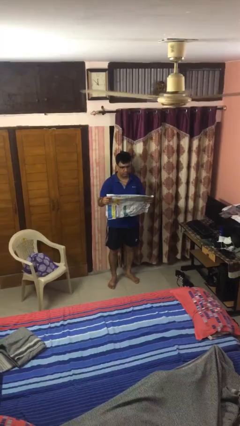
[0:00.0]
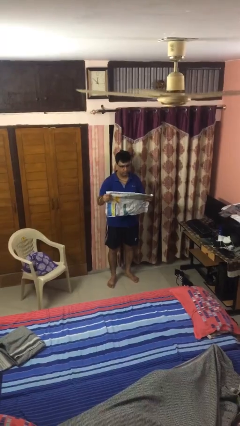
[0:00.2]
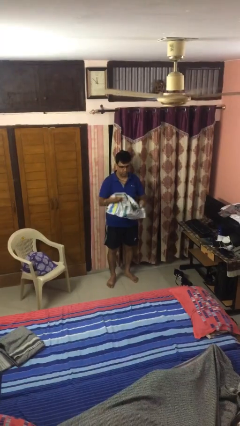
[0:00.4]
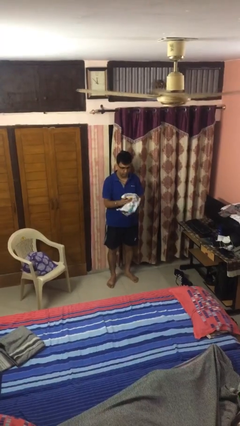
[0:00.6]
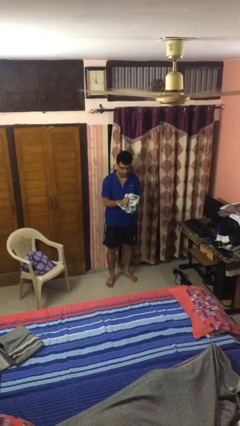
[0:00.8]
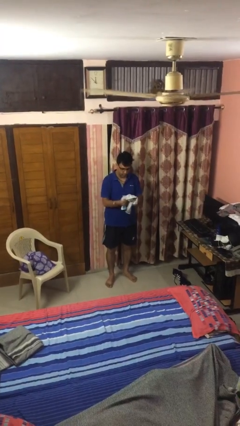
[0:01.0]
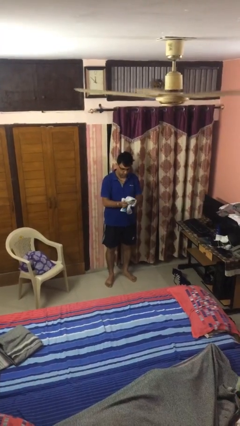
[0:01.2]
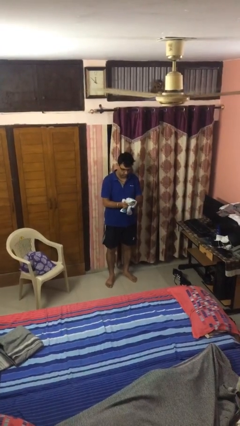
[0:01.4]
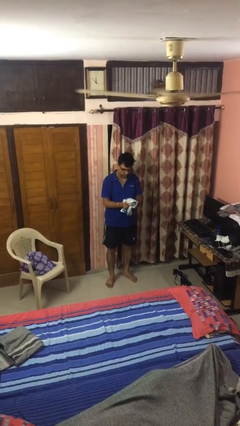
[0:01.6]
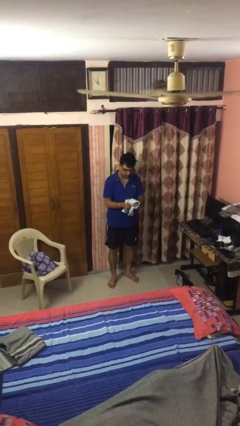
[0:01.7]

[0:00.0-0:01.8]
person crumples paper

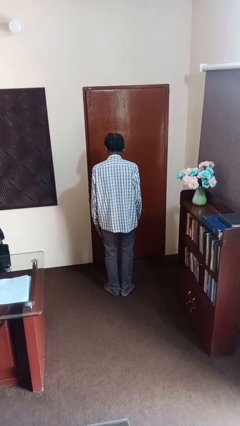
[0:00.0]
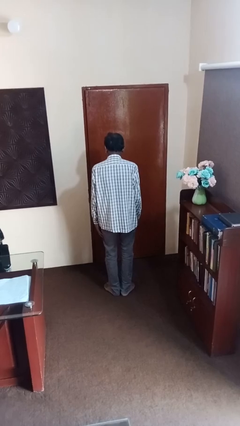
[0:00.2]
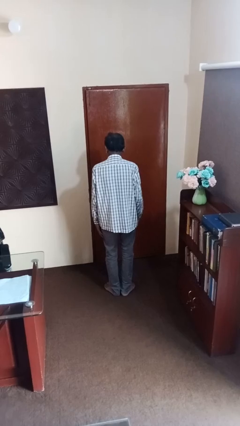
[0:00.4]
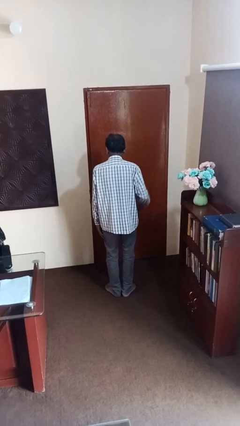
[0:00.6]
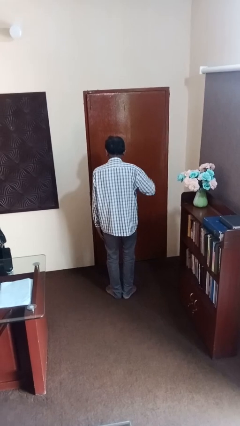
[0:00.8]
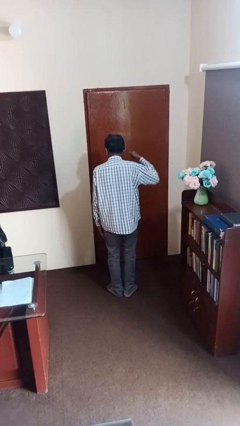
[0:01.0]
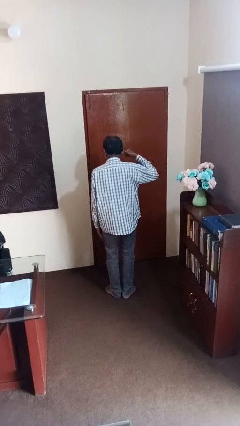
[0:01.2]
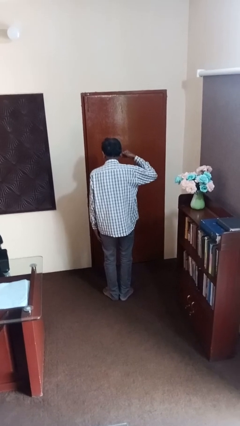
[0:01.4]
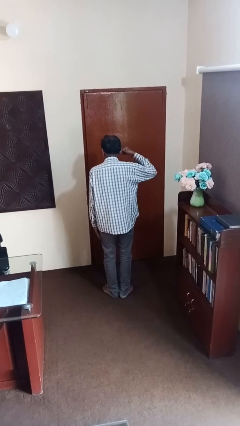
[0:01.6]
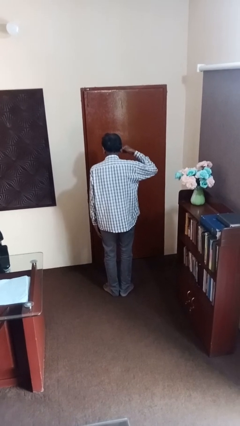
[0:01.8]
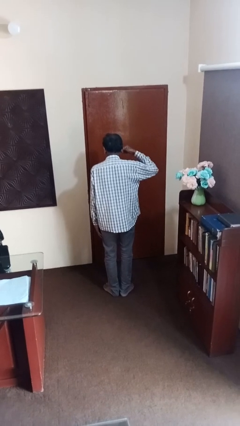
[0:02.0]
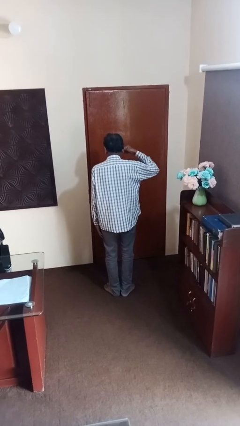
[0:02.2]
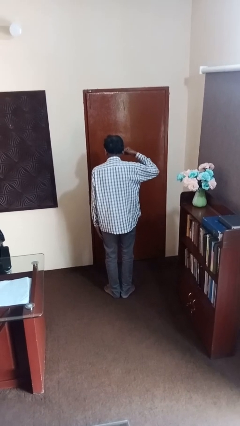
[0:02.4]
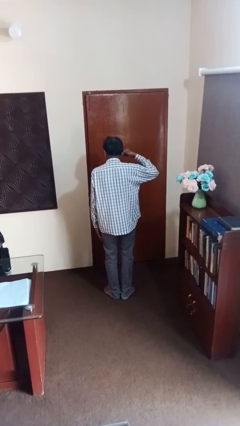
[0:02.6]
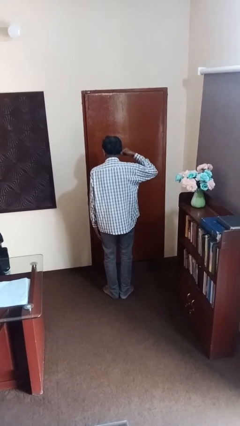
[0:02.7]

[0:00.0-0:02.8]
person gestures call me

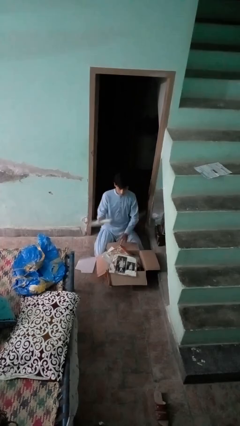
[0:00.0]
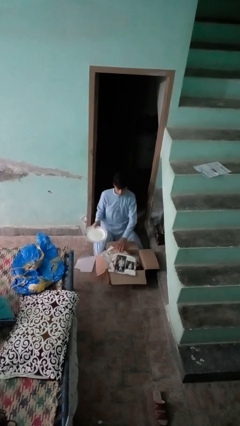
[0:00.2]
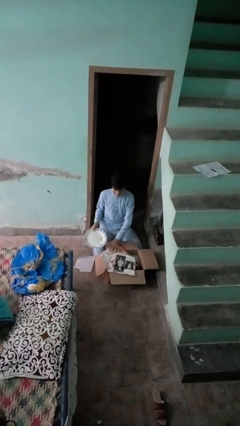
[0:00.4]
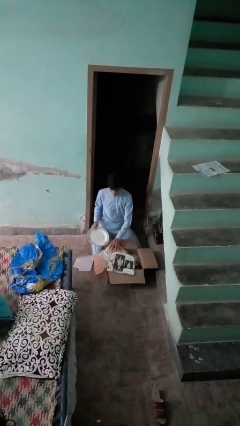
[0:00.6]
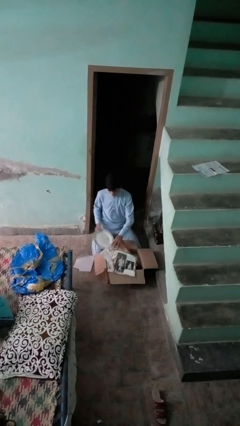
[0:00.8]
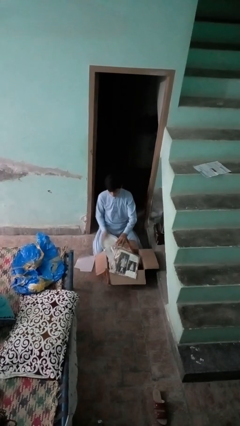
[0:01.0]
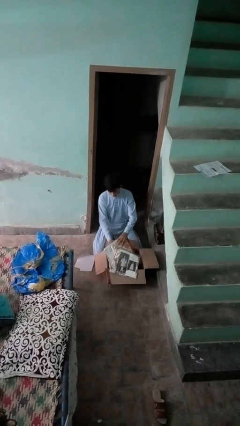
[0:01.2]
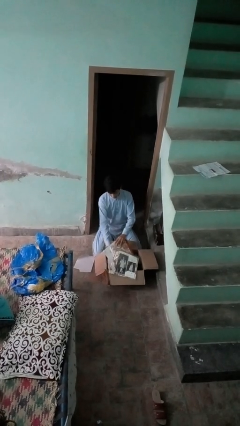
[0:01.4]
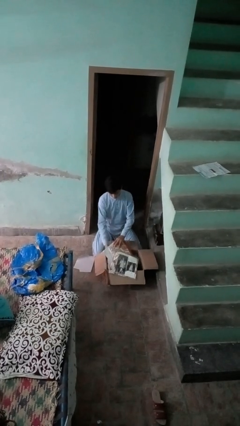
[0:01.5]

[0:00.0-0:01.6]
person puts object into box

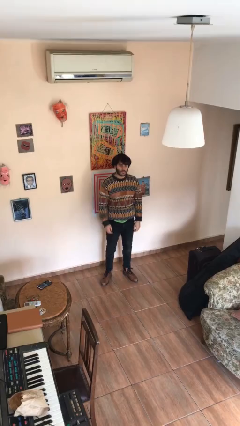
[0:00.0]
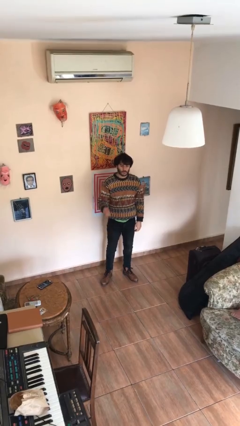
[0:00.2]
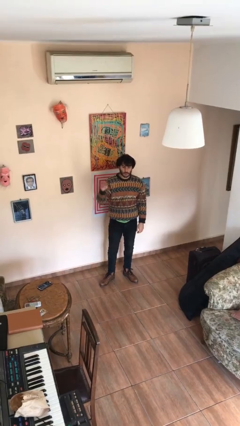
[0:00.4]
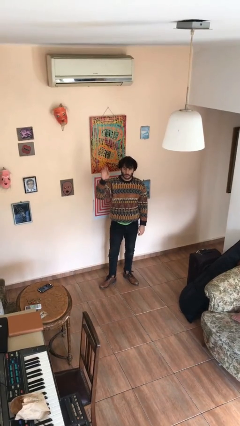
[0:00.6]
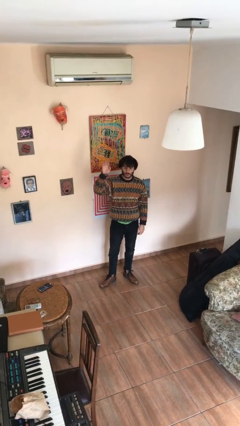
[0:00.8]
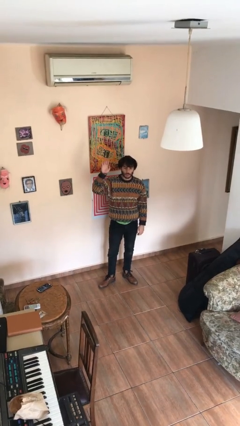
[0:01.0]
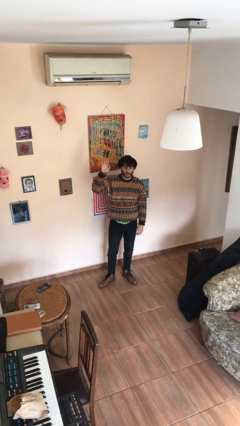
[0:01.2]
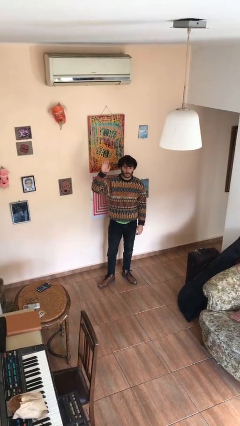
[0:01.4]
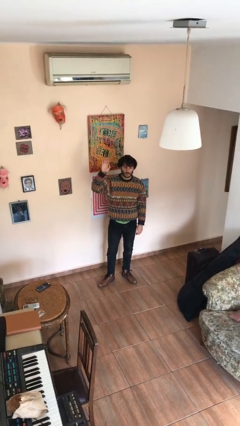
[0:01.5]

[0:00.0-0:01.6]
person gestures raise hand

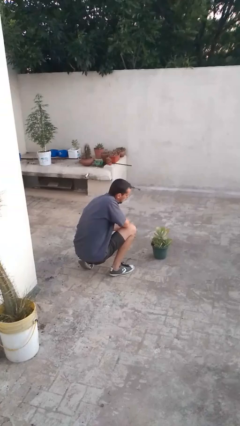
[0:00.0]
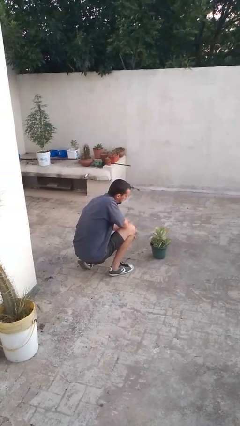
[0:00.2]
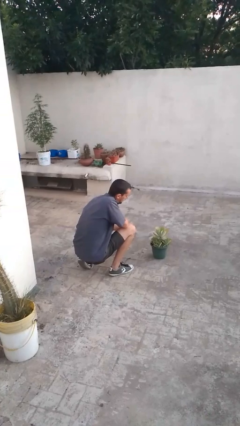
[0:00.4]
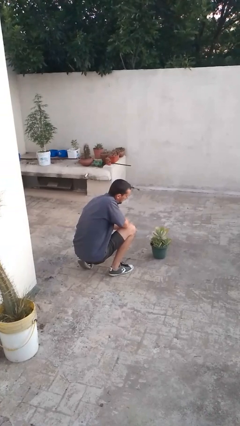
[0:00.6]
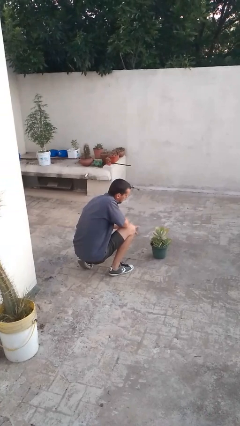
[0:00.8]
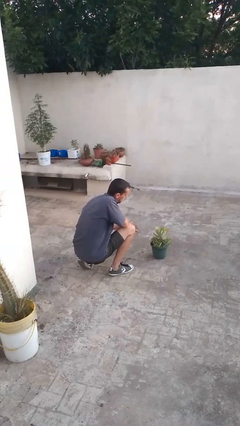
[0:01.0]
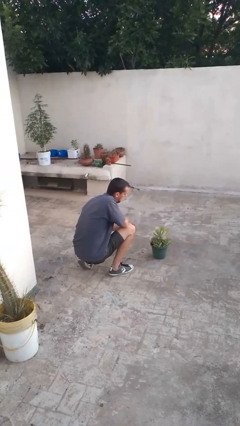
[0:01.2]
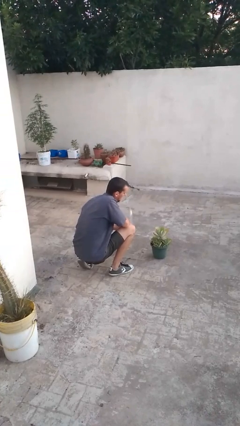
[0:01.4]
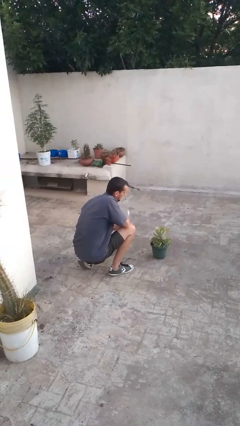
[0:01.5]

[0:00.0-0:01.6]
person waters houseplant

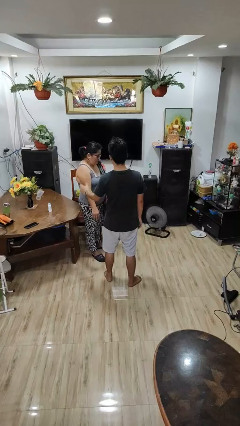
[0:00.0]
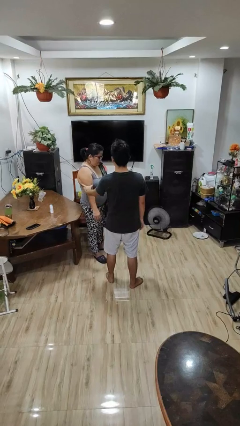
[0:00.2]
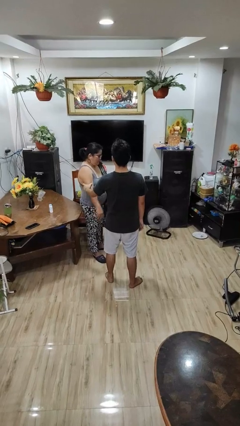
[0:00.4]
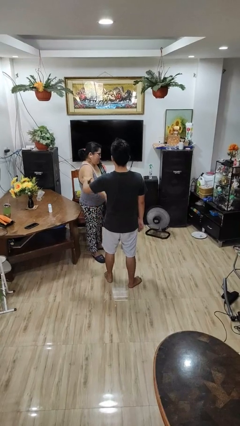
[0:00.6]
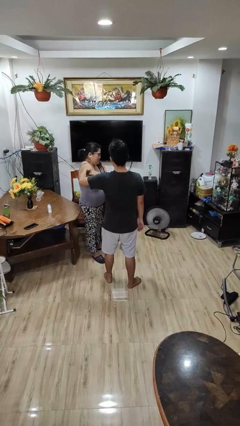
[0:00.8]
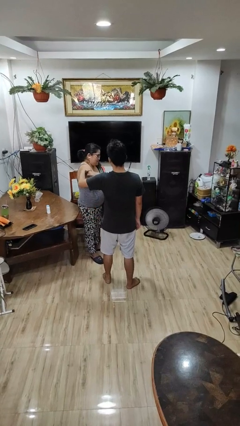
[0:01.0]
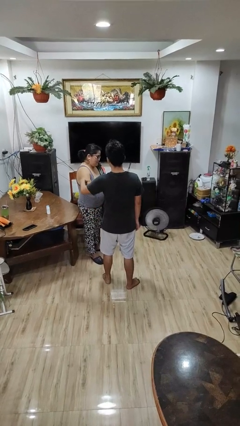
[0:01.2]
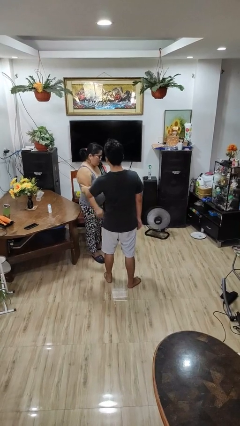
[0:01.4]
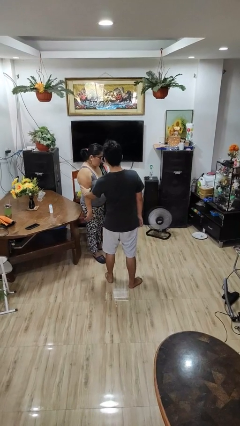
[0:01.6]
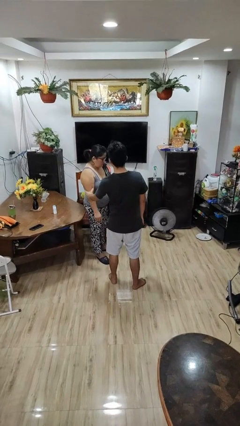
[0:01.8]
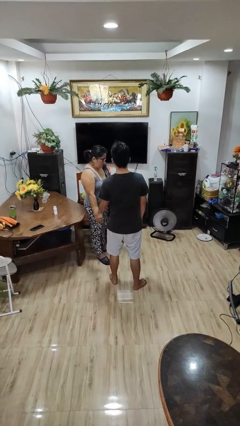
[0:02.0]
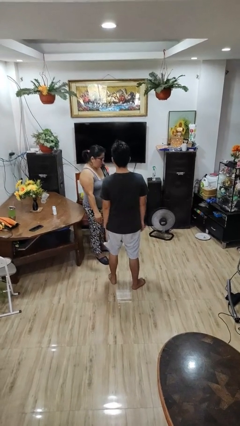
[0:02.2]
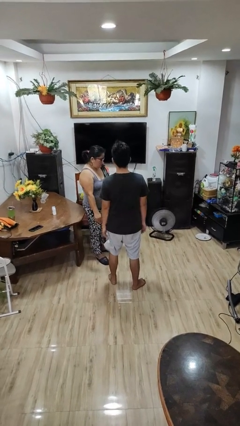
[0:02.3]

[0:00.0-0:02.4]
person grabs person by bicep

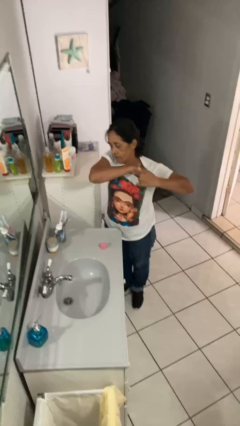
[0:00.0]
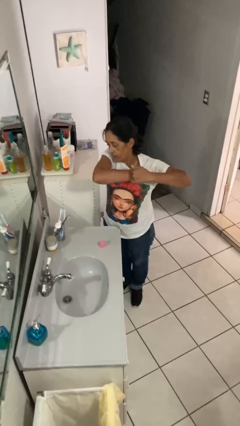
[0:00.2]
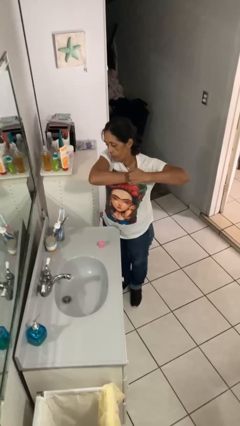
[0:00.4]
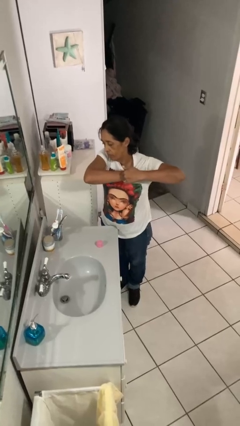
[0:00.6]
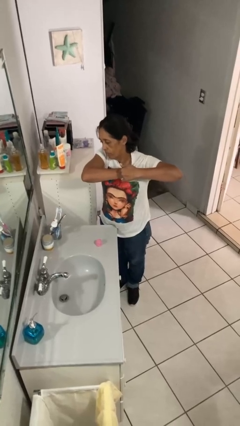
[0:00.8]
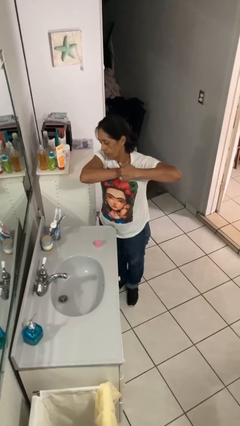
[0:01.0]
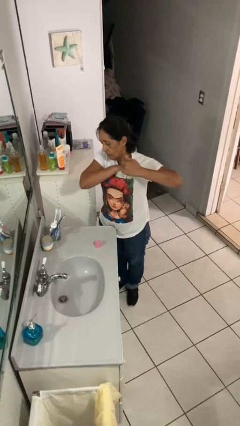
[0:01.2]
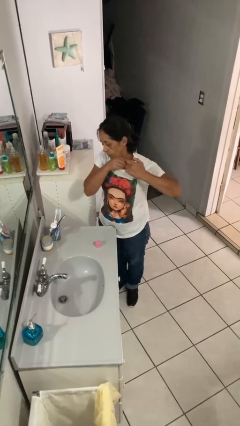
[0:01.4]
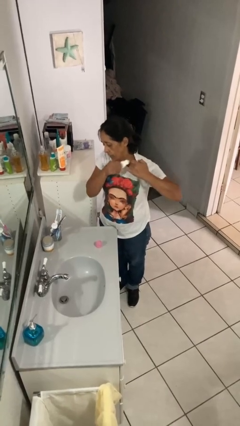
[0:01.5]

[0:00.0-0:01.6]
person applies deodorant

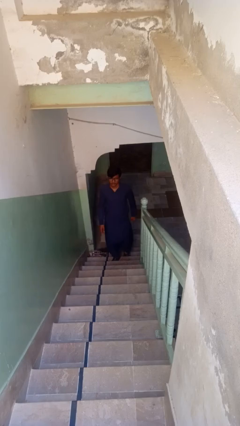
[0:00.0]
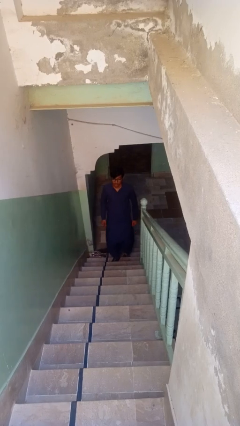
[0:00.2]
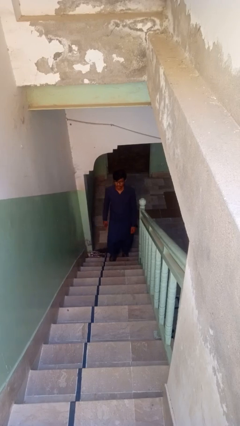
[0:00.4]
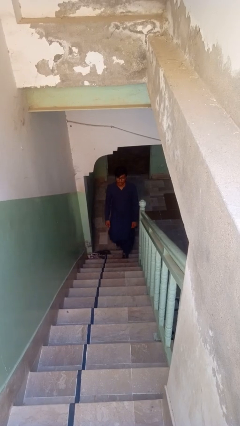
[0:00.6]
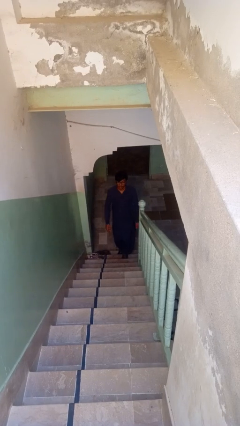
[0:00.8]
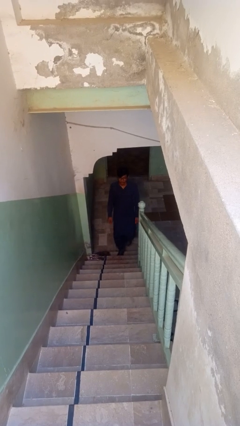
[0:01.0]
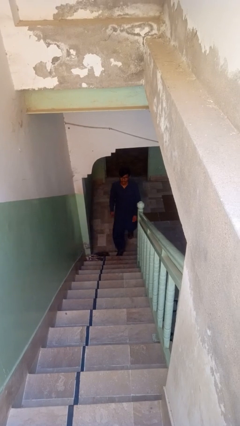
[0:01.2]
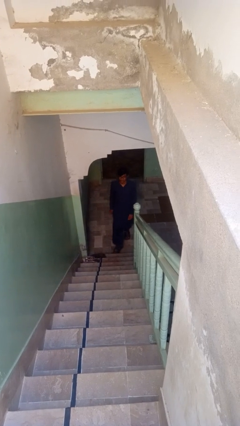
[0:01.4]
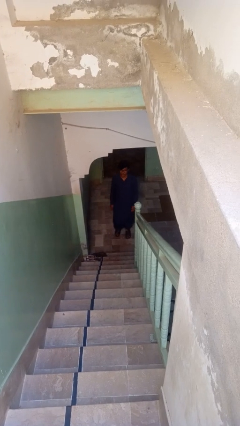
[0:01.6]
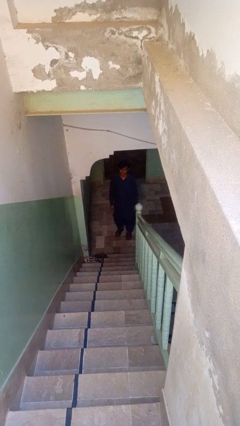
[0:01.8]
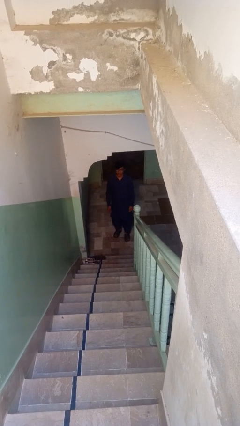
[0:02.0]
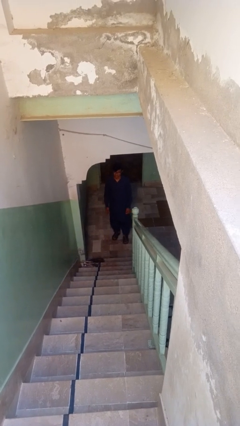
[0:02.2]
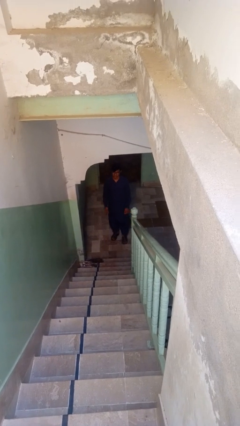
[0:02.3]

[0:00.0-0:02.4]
person climbs down stairs

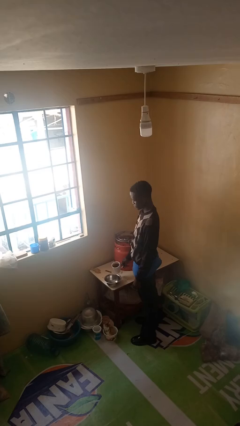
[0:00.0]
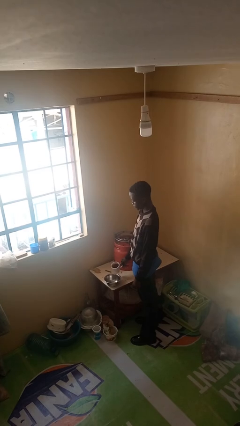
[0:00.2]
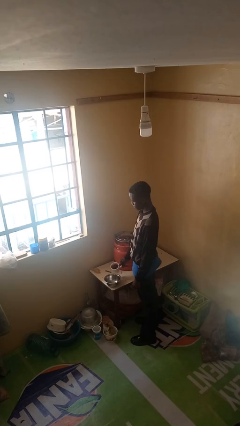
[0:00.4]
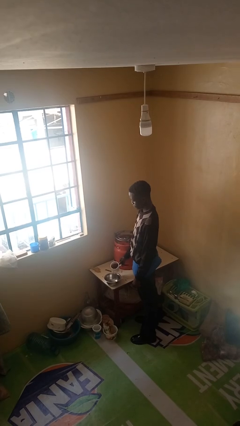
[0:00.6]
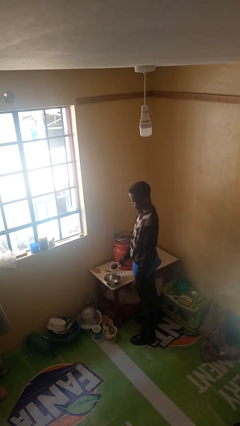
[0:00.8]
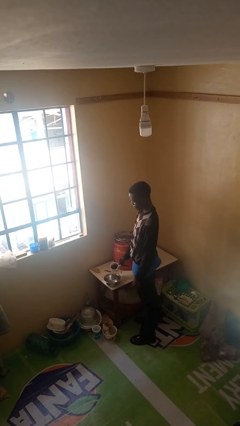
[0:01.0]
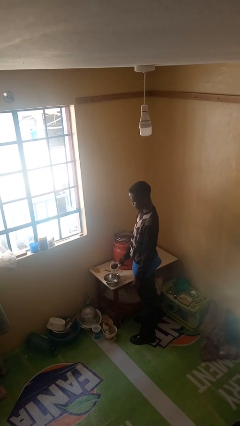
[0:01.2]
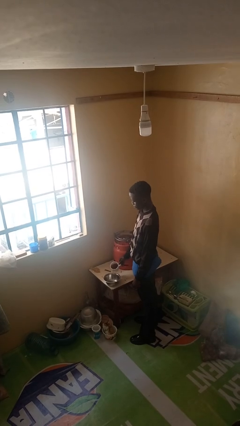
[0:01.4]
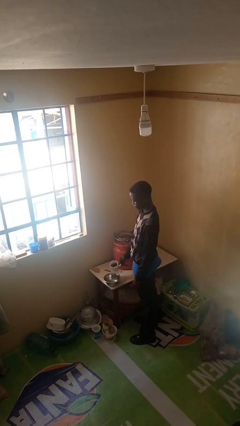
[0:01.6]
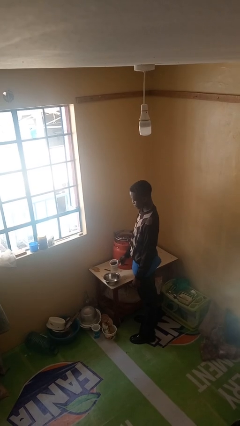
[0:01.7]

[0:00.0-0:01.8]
person pours into bowl
